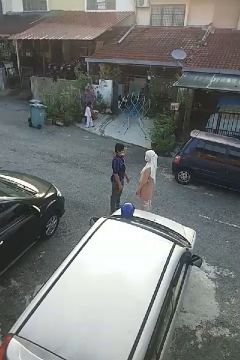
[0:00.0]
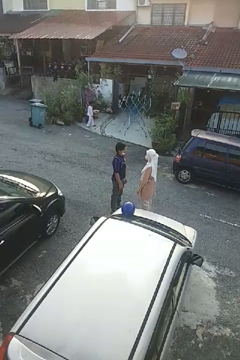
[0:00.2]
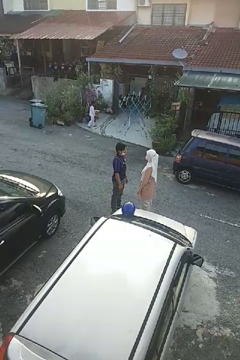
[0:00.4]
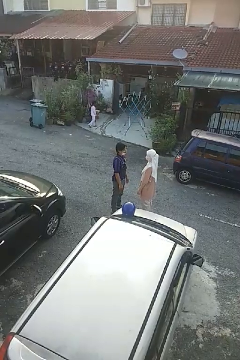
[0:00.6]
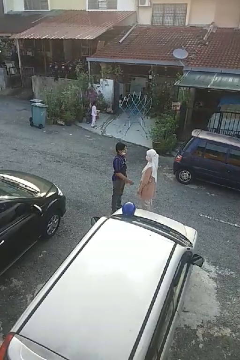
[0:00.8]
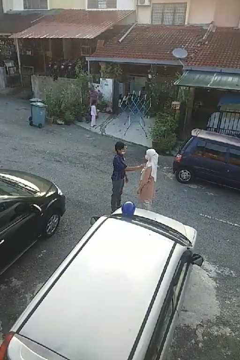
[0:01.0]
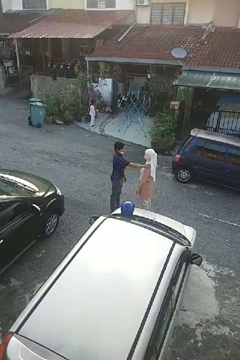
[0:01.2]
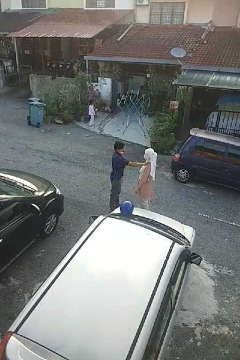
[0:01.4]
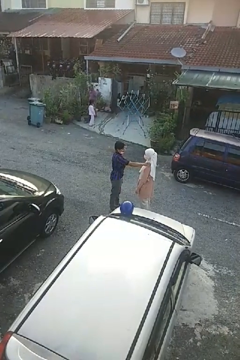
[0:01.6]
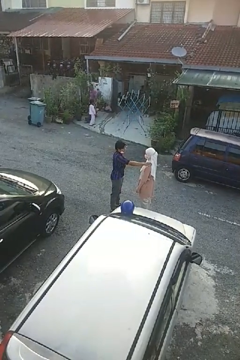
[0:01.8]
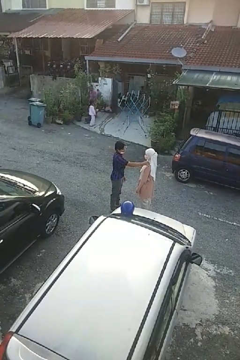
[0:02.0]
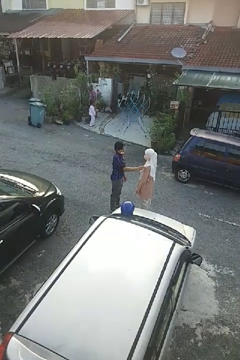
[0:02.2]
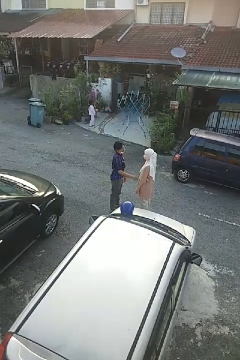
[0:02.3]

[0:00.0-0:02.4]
person pounds shoulders of person

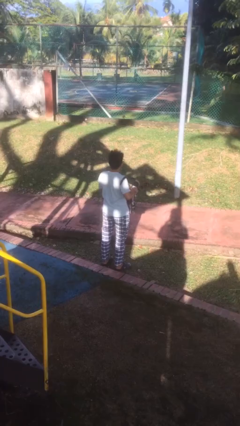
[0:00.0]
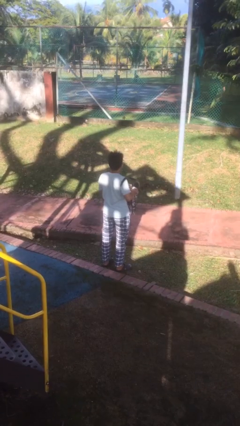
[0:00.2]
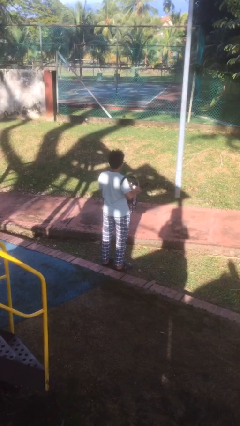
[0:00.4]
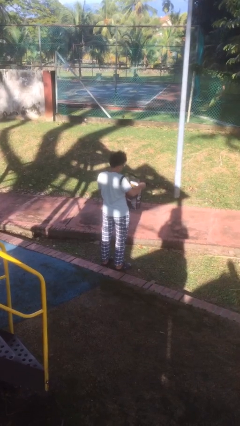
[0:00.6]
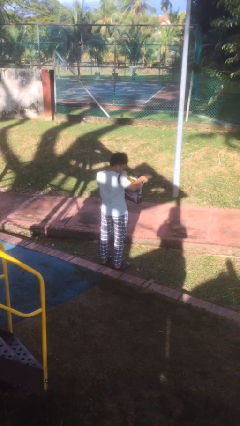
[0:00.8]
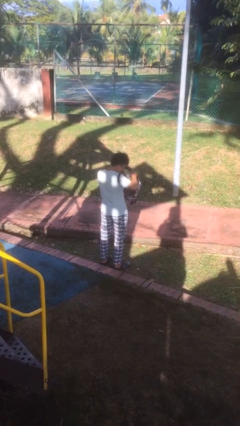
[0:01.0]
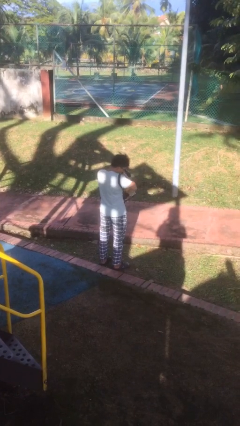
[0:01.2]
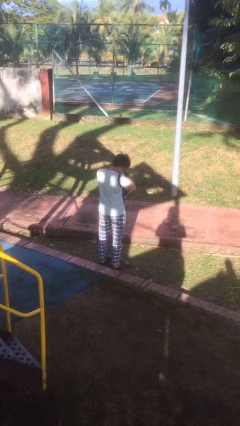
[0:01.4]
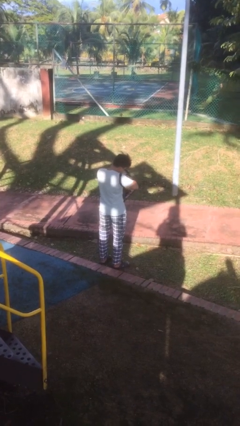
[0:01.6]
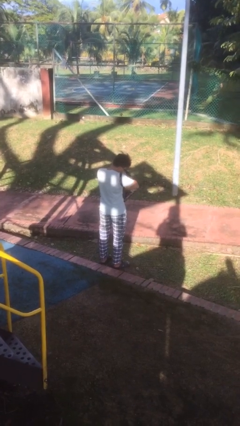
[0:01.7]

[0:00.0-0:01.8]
person searches in bag

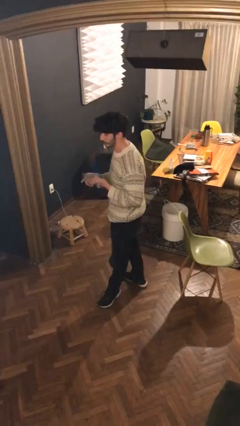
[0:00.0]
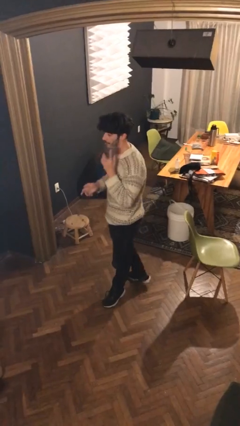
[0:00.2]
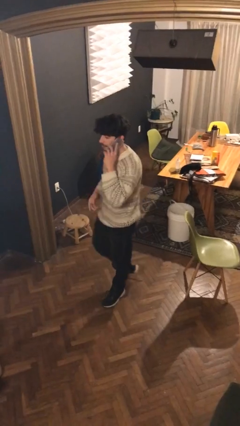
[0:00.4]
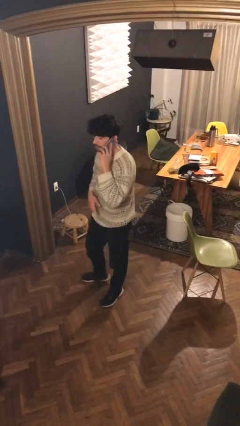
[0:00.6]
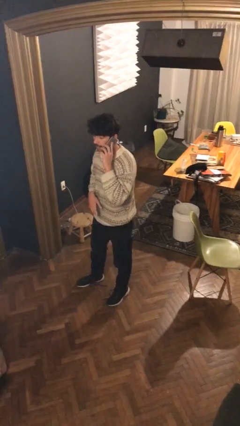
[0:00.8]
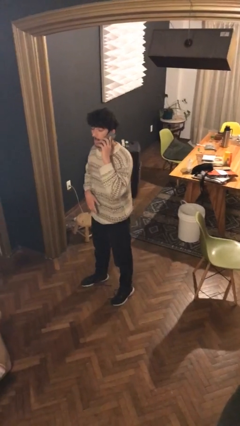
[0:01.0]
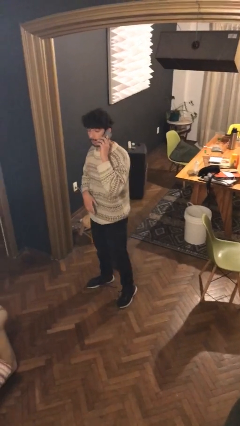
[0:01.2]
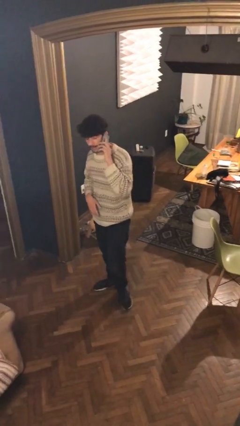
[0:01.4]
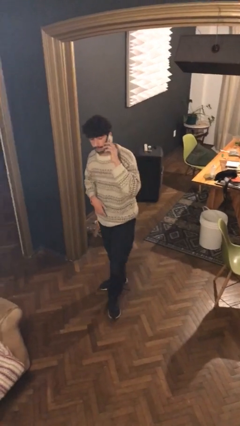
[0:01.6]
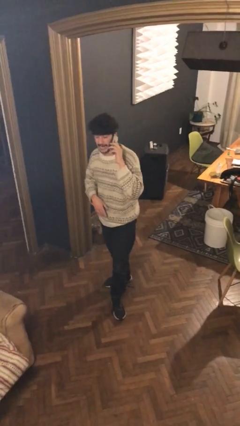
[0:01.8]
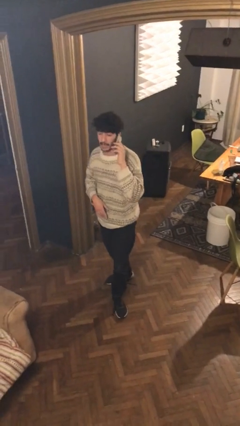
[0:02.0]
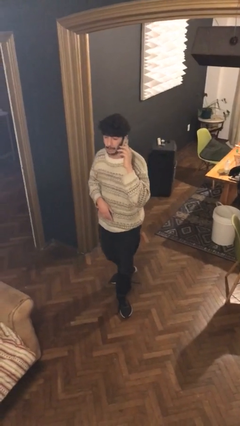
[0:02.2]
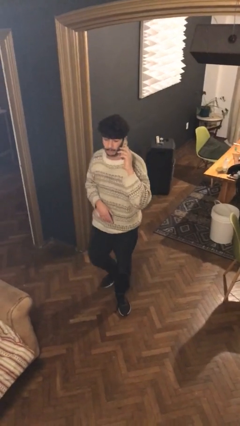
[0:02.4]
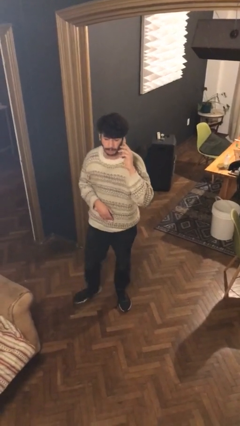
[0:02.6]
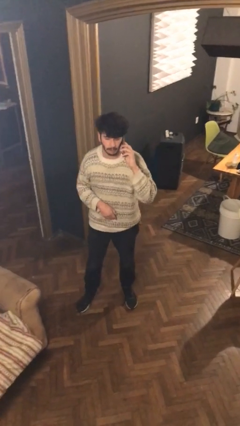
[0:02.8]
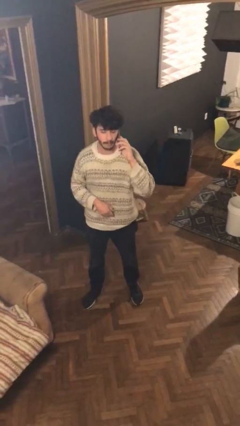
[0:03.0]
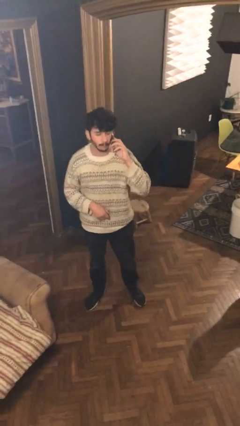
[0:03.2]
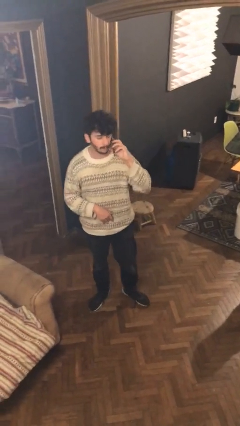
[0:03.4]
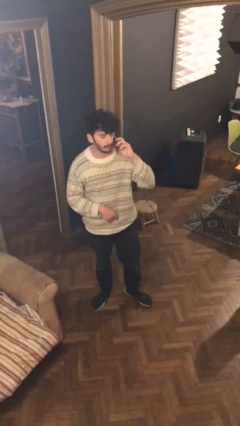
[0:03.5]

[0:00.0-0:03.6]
person talks on phone

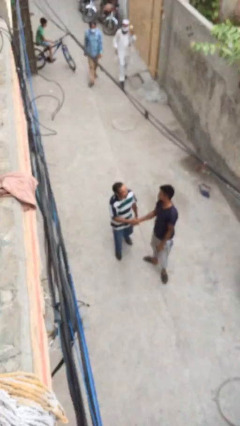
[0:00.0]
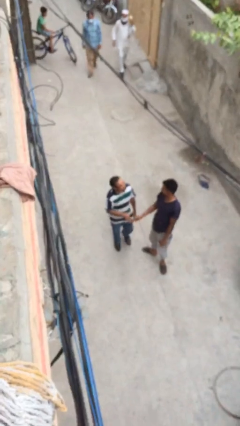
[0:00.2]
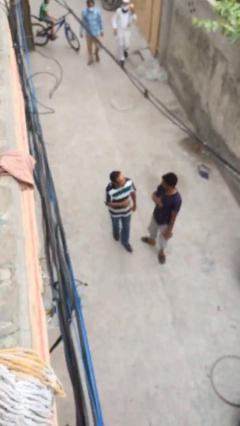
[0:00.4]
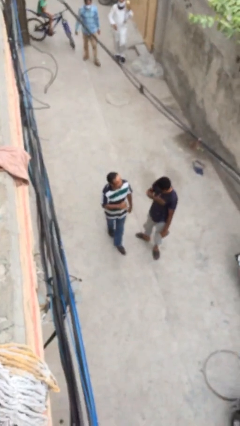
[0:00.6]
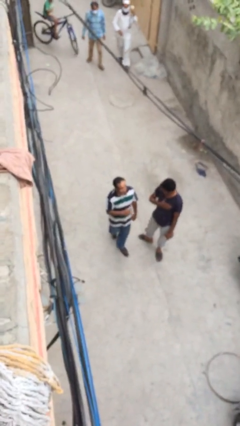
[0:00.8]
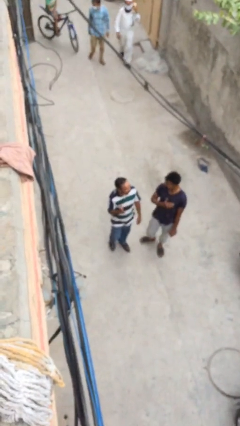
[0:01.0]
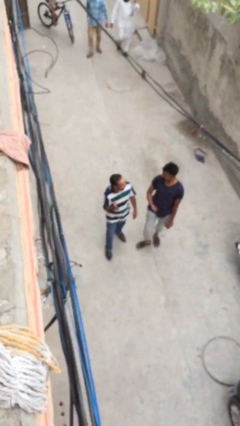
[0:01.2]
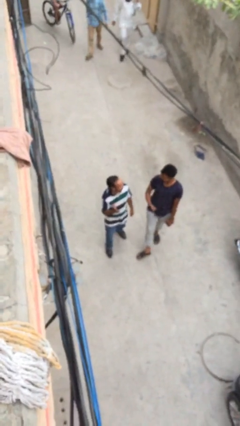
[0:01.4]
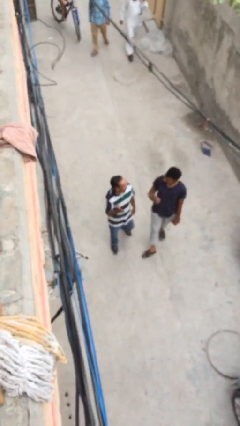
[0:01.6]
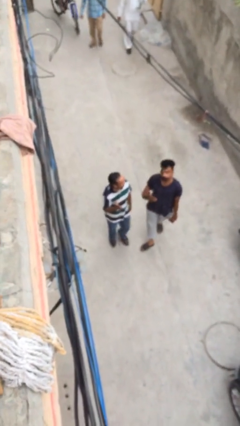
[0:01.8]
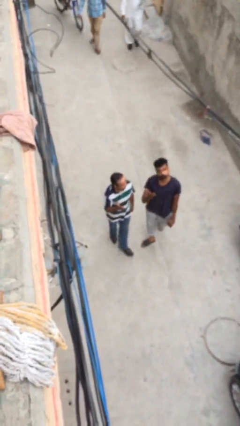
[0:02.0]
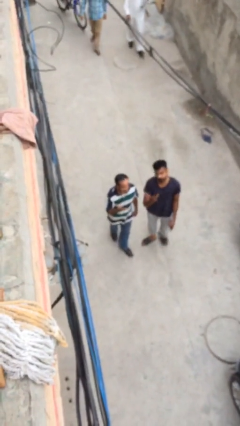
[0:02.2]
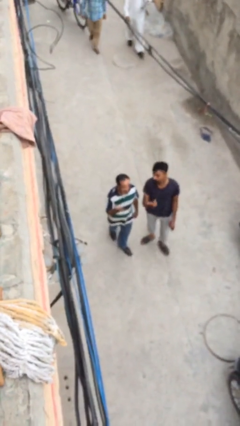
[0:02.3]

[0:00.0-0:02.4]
person talks to person

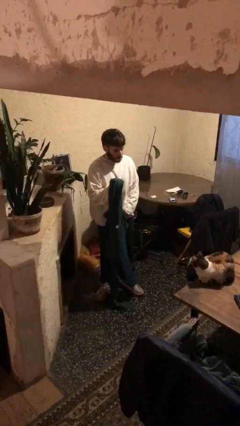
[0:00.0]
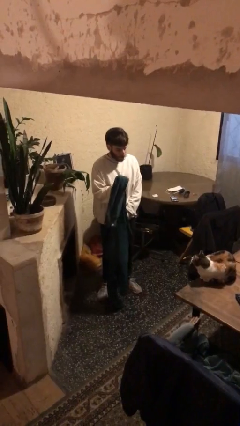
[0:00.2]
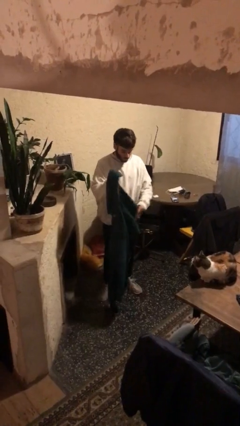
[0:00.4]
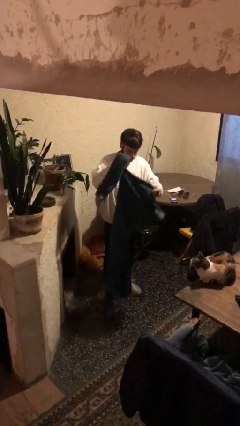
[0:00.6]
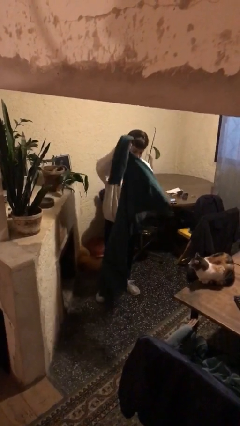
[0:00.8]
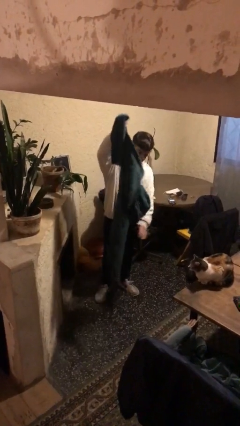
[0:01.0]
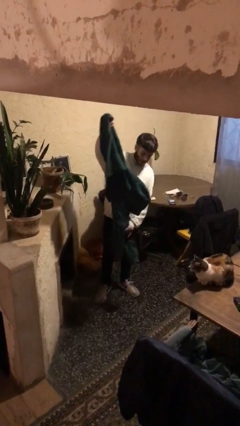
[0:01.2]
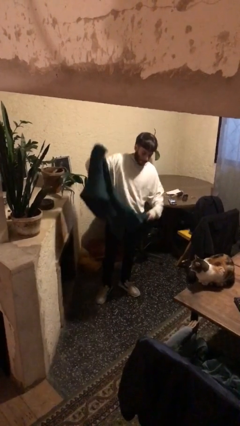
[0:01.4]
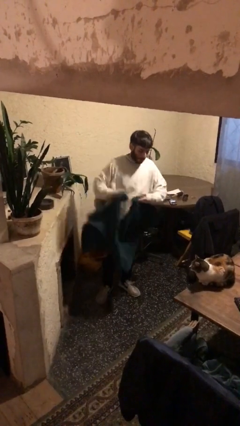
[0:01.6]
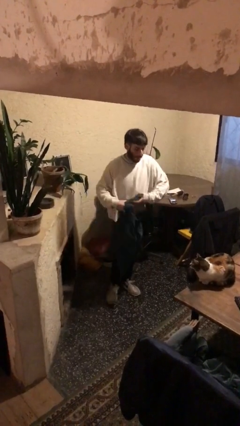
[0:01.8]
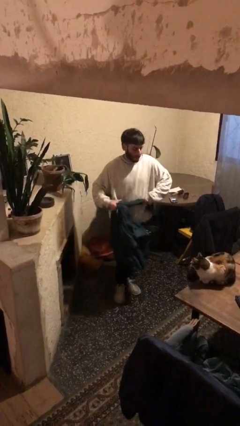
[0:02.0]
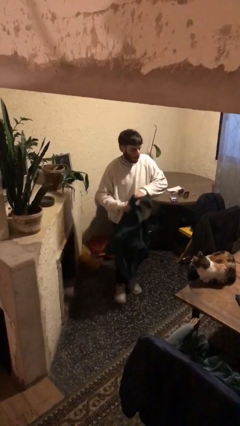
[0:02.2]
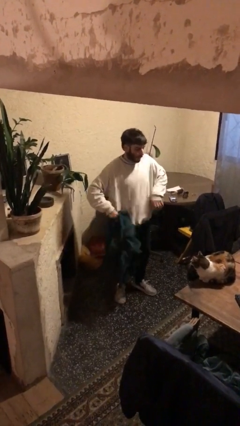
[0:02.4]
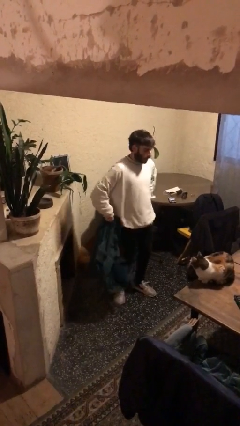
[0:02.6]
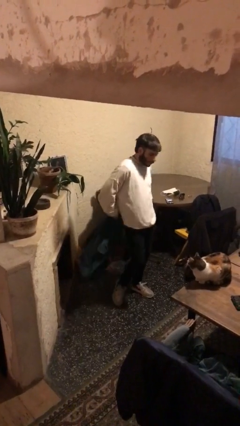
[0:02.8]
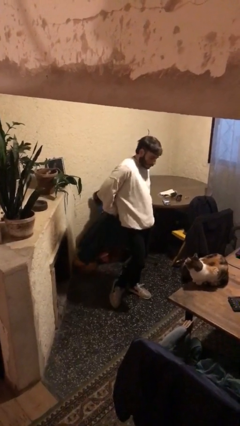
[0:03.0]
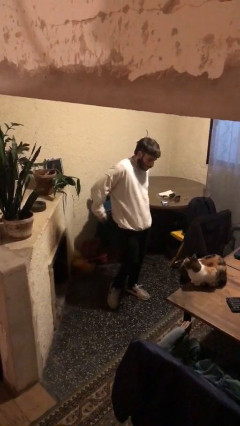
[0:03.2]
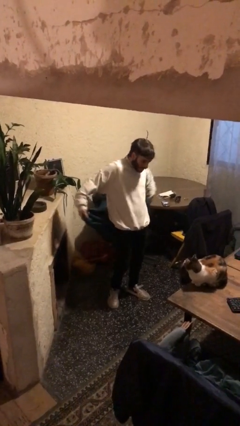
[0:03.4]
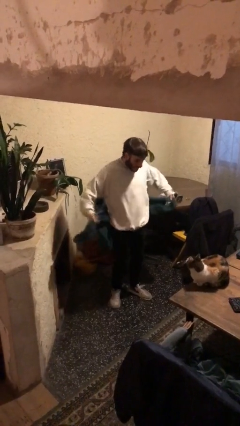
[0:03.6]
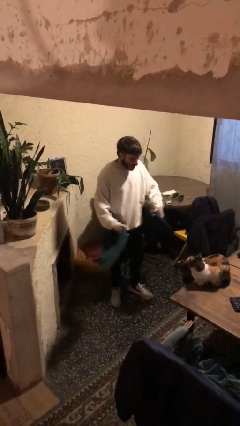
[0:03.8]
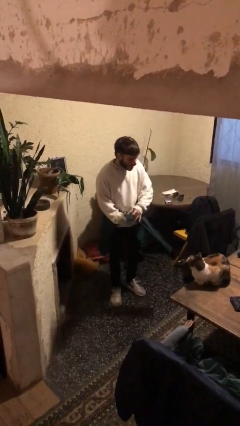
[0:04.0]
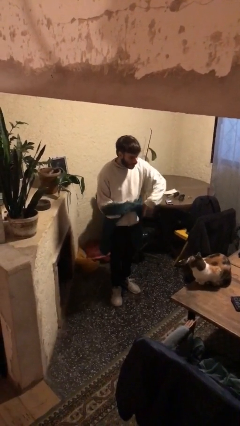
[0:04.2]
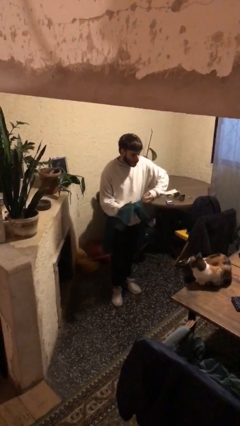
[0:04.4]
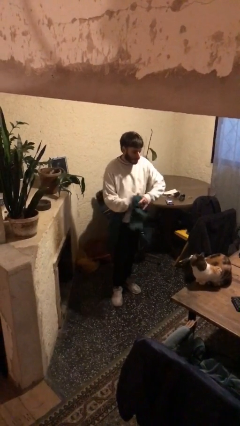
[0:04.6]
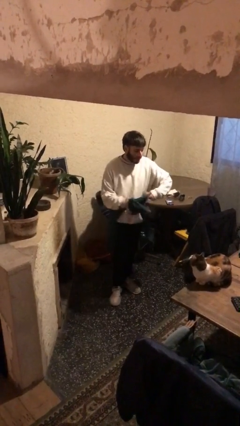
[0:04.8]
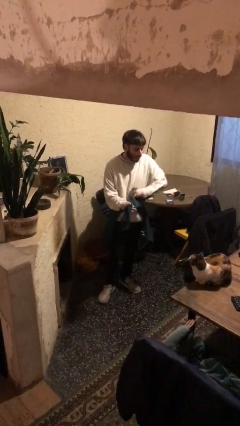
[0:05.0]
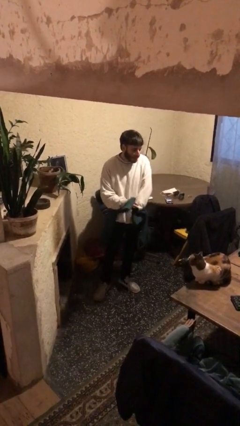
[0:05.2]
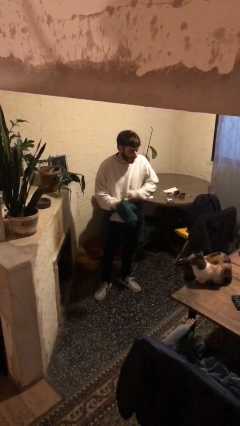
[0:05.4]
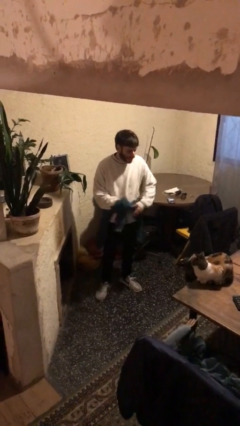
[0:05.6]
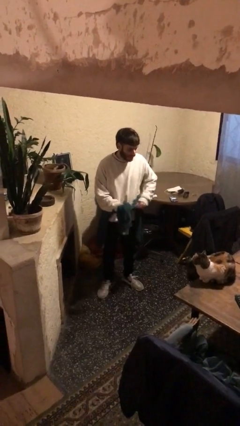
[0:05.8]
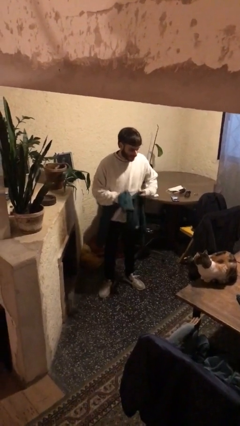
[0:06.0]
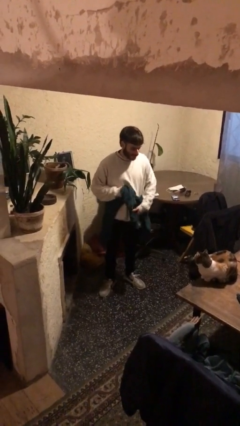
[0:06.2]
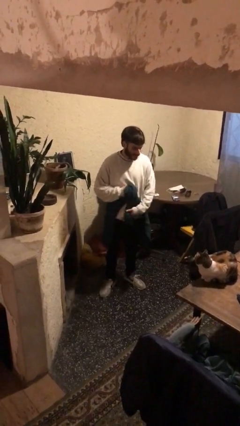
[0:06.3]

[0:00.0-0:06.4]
person ties jacket around waist

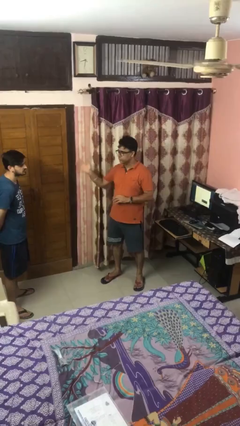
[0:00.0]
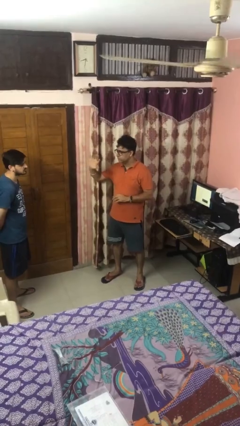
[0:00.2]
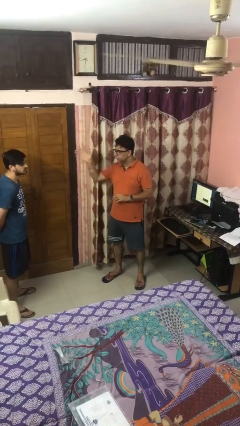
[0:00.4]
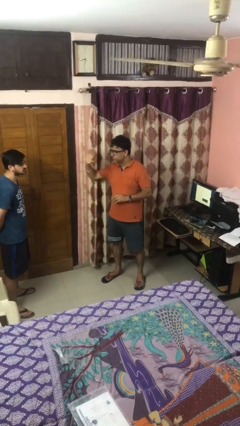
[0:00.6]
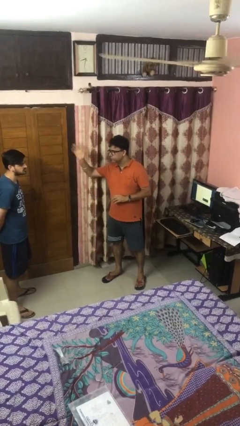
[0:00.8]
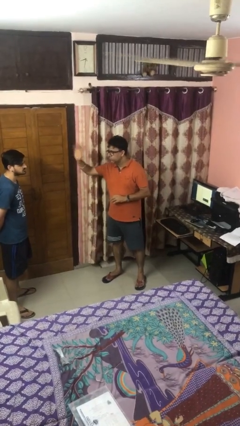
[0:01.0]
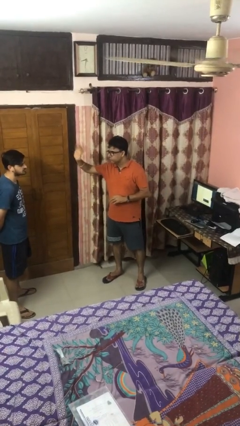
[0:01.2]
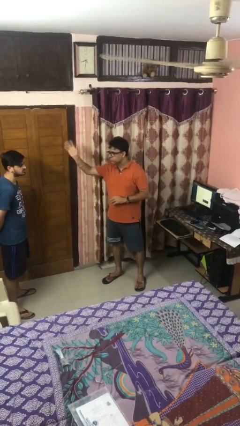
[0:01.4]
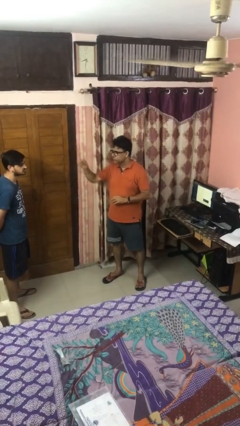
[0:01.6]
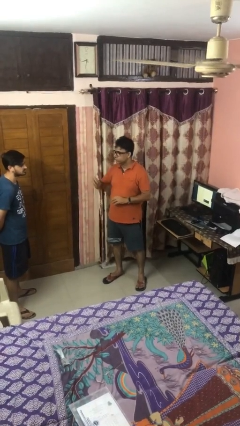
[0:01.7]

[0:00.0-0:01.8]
person waves at person
